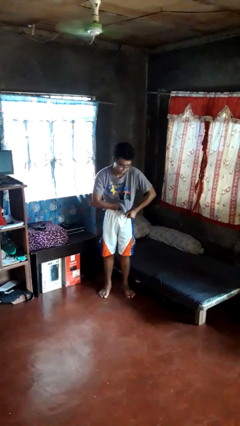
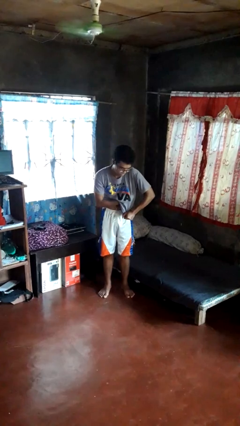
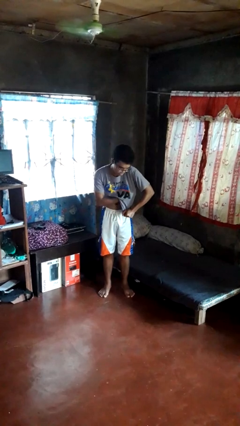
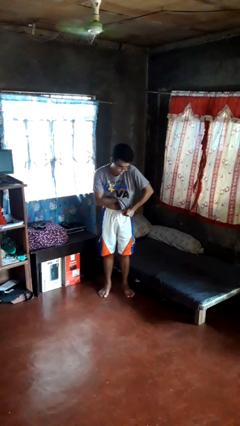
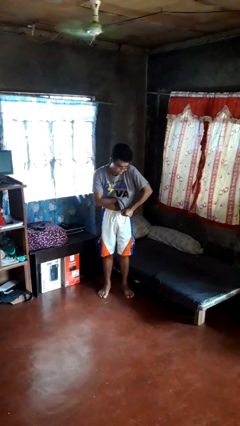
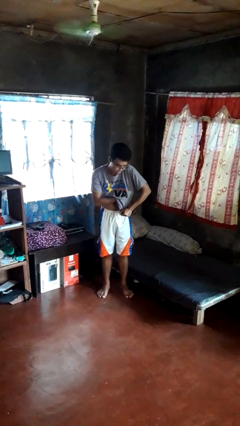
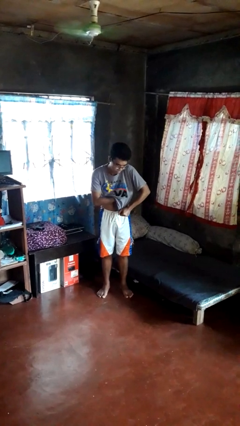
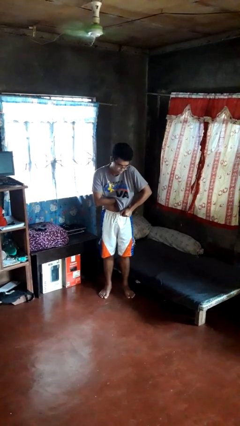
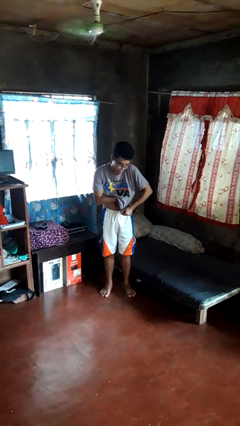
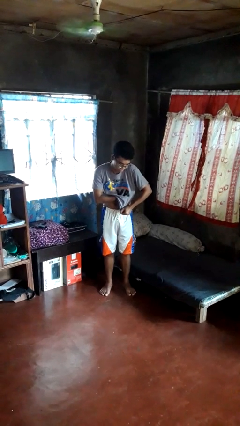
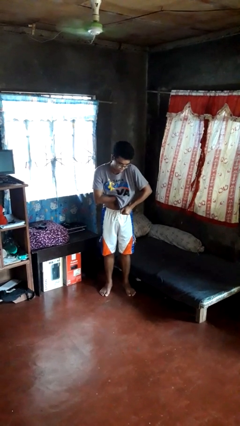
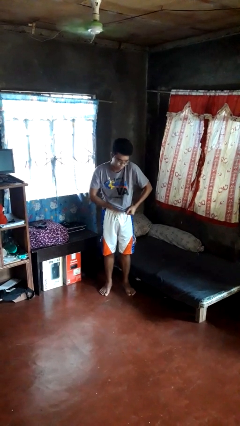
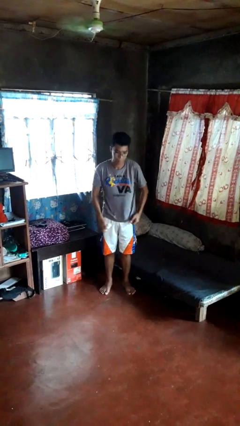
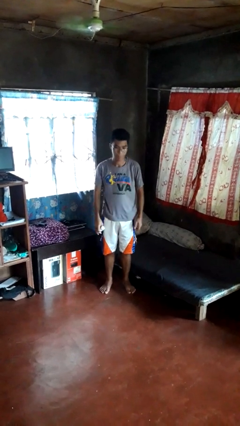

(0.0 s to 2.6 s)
person applies deodorant

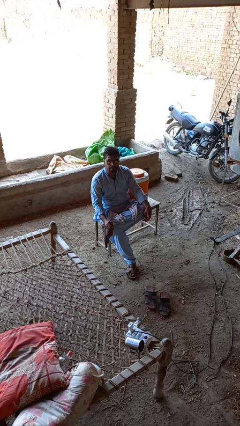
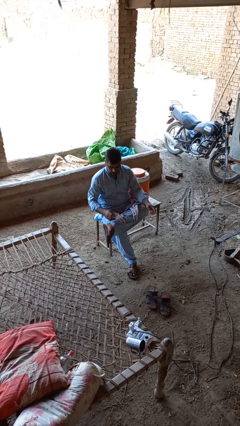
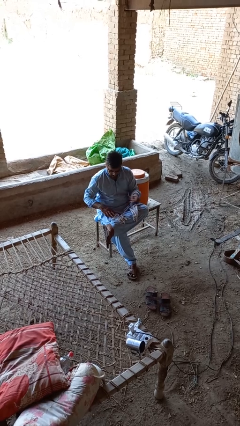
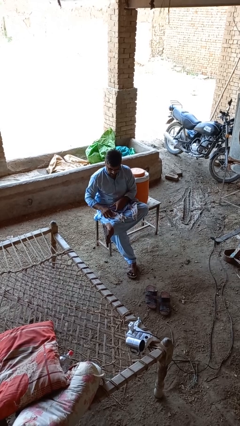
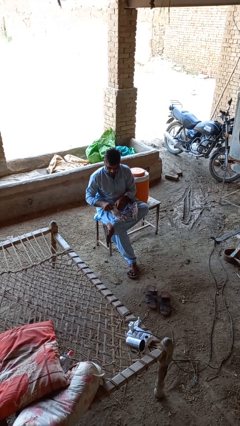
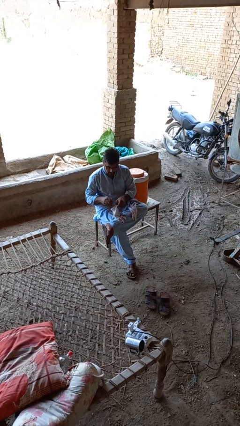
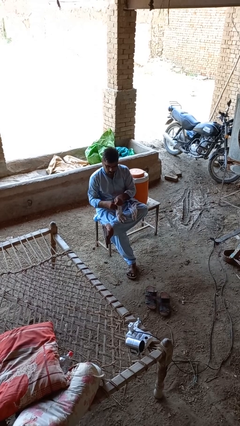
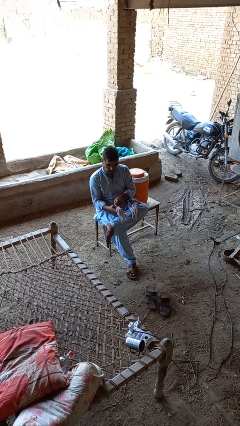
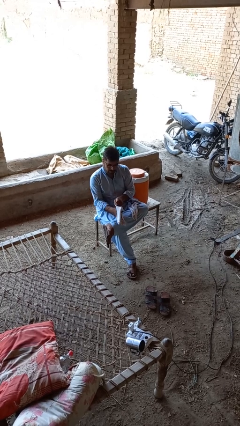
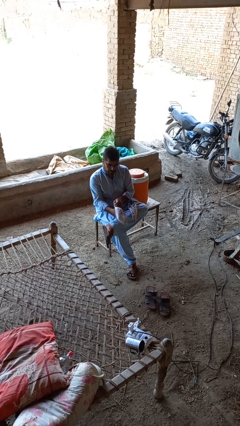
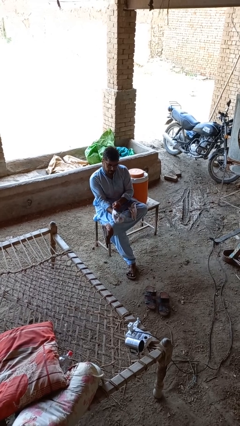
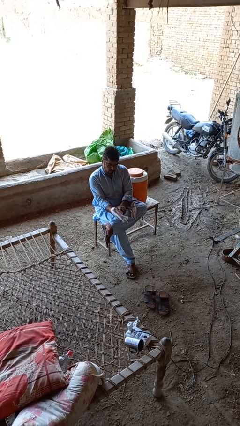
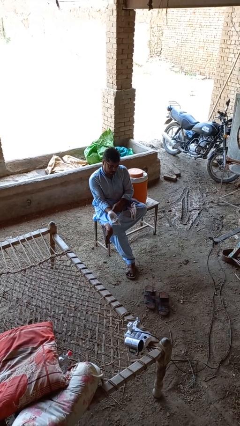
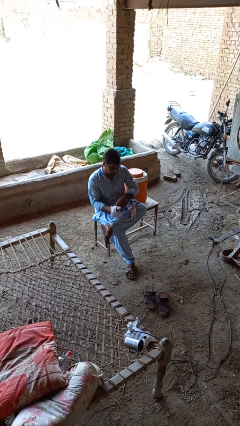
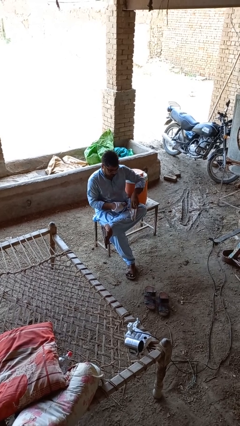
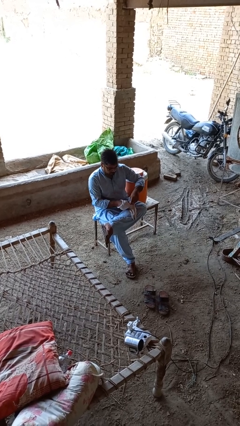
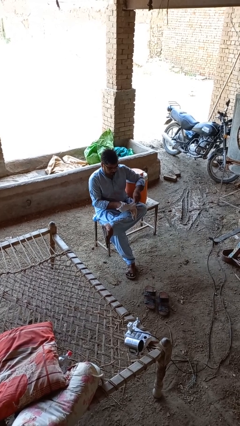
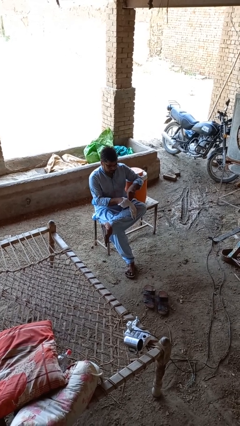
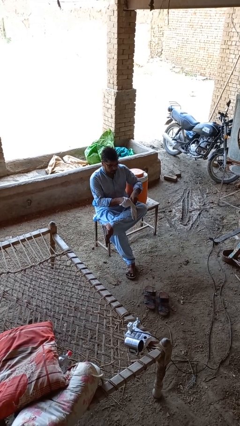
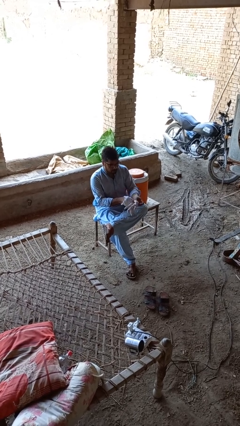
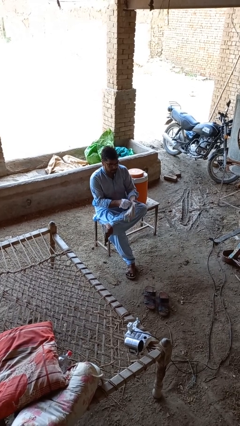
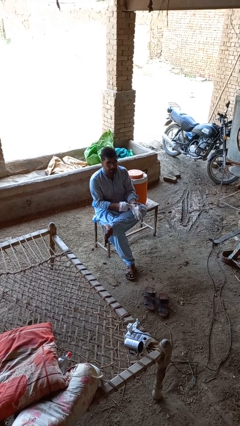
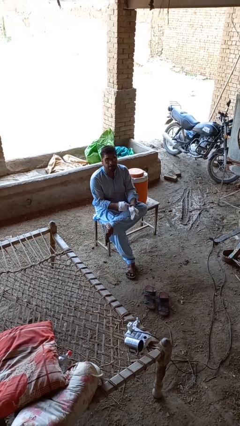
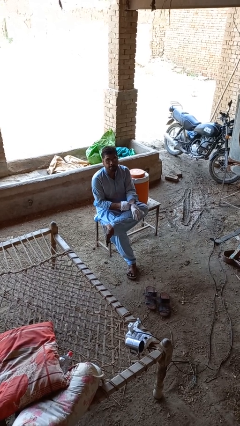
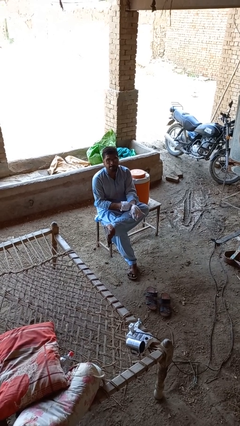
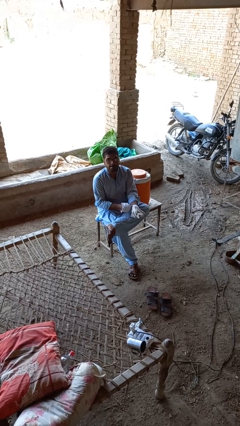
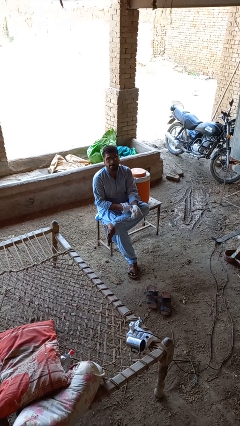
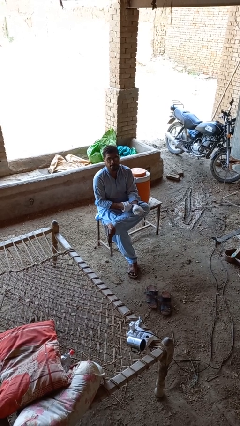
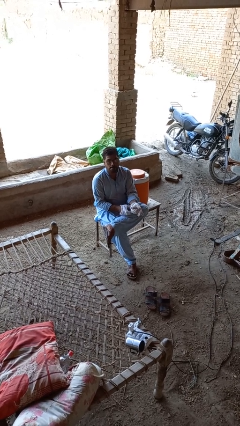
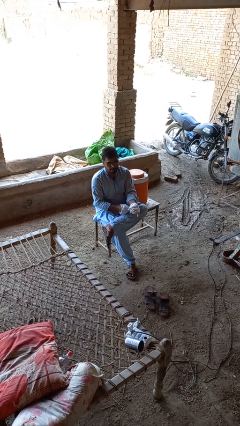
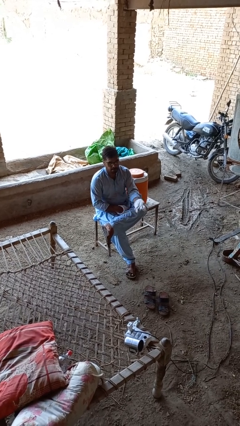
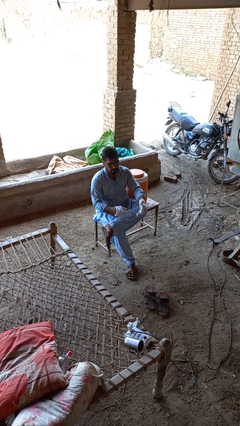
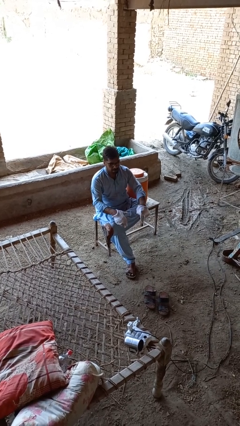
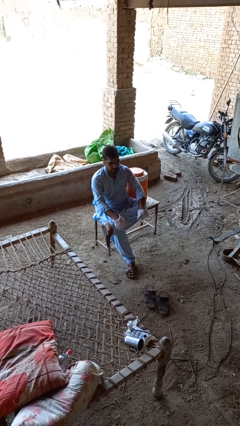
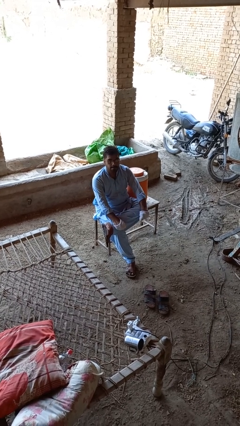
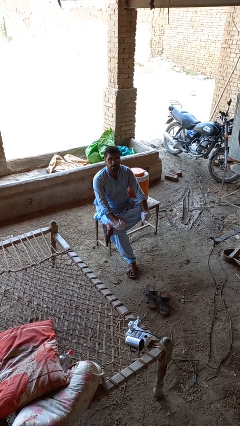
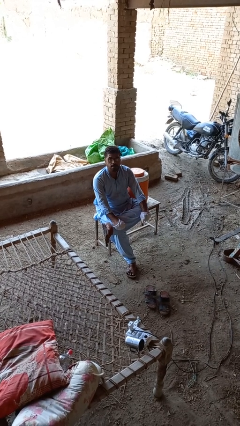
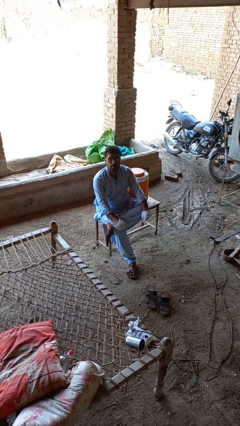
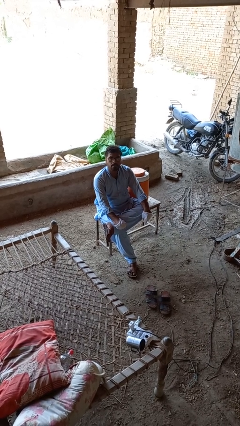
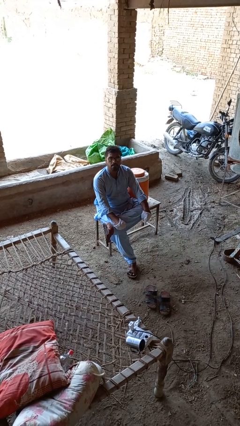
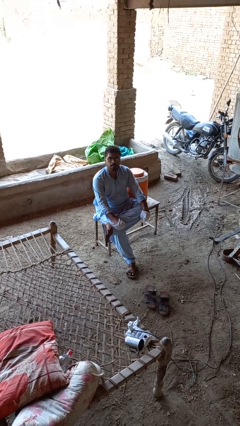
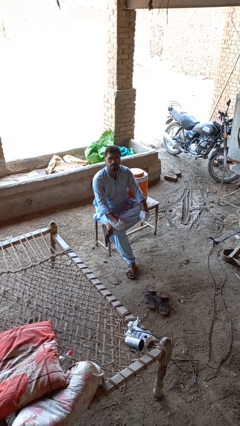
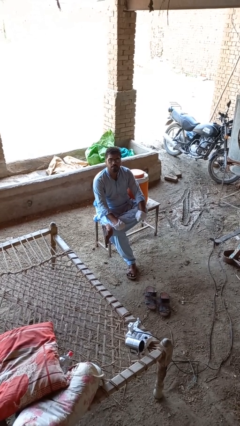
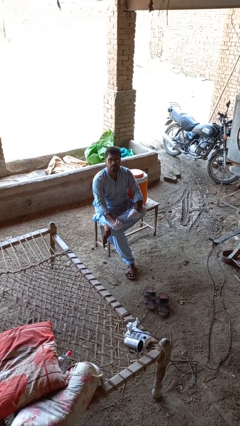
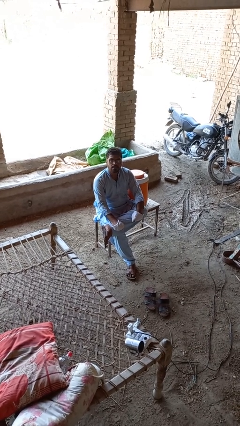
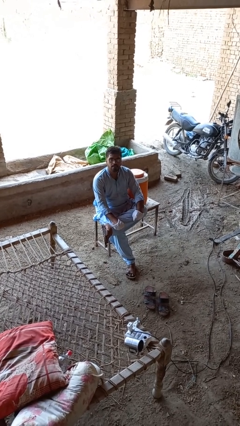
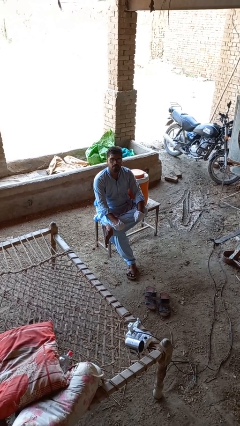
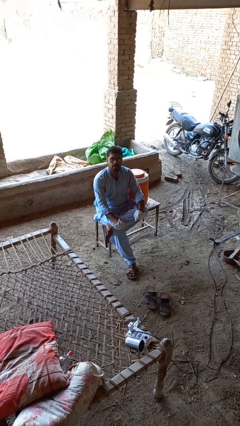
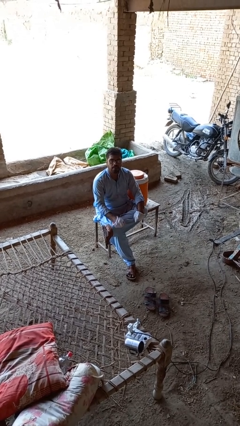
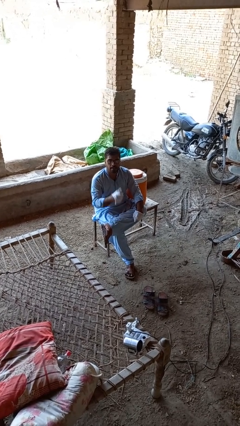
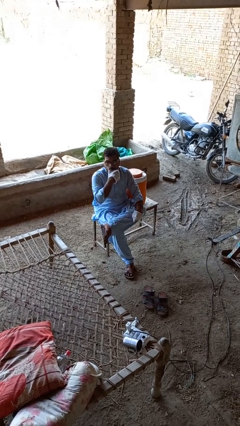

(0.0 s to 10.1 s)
person puts on gloves

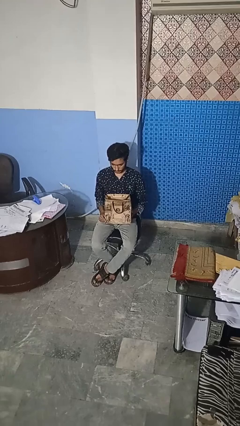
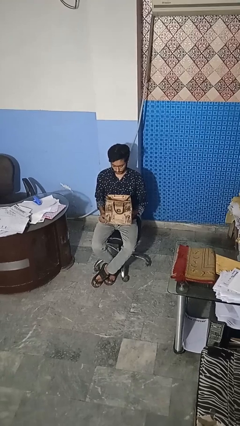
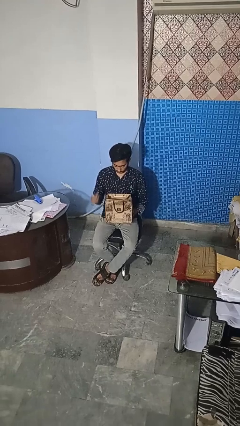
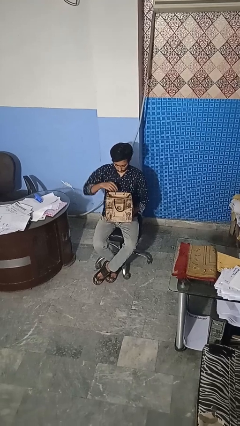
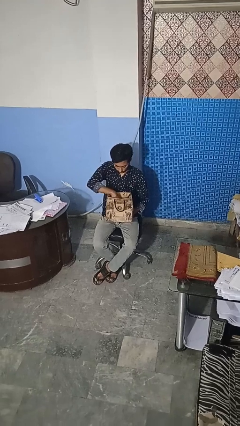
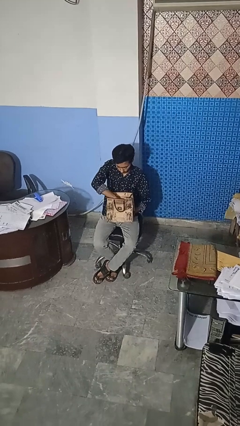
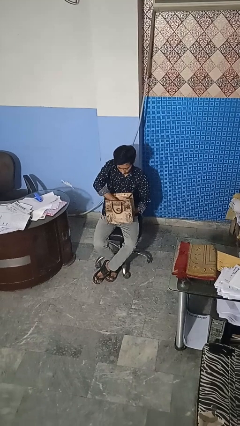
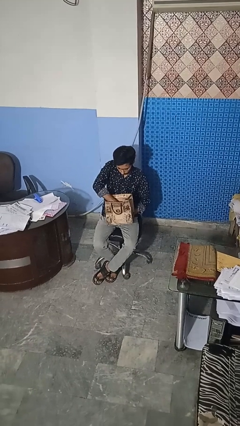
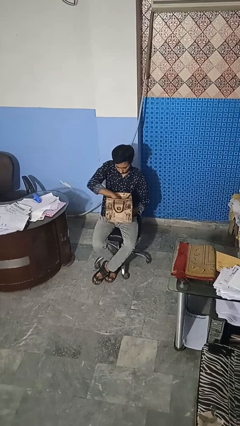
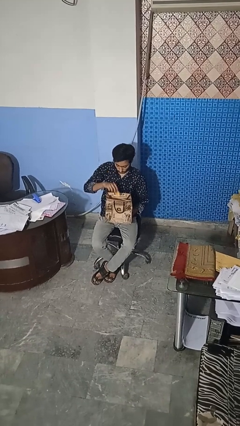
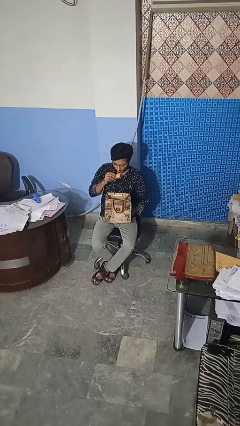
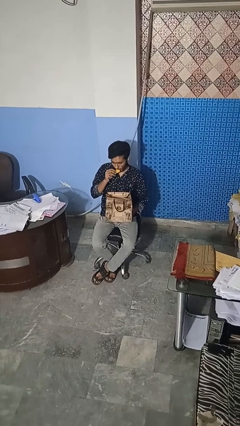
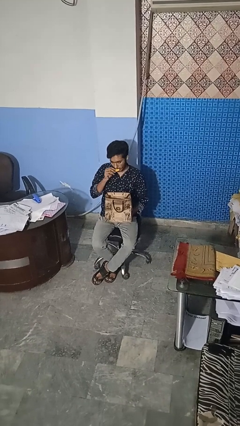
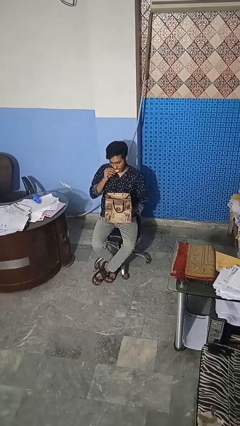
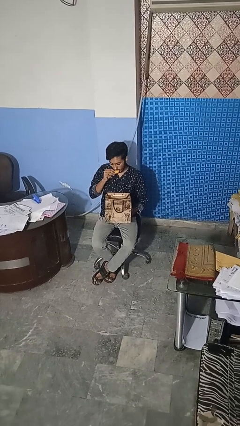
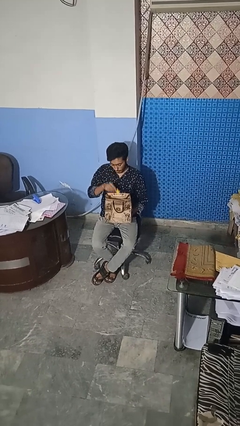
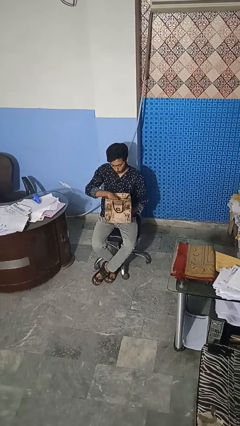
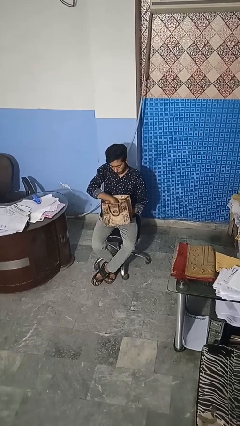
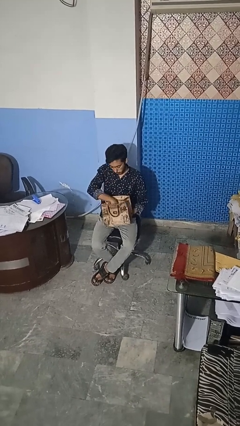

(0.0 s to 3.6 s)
person eats snack from bag

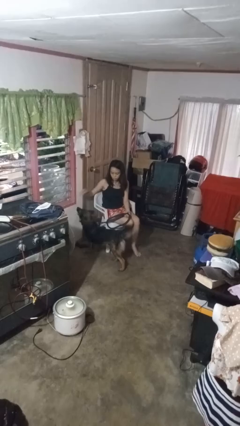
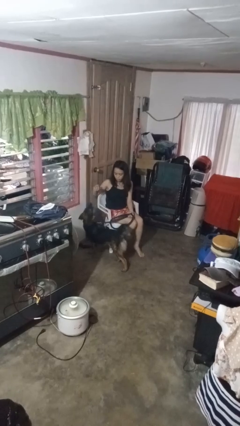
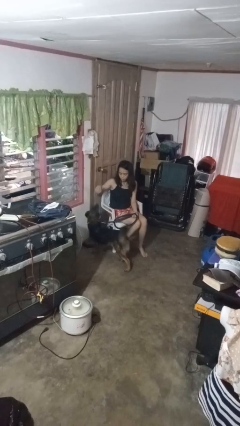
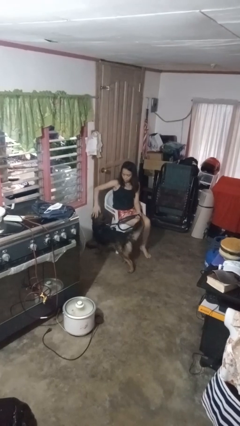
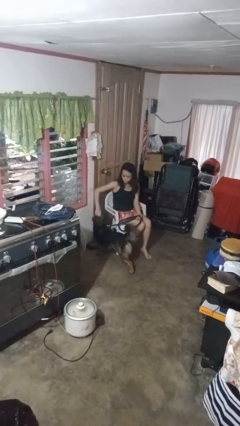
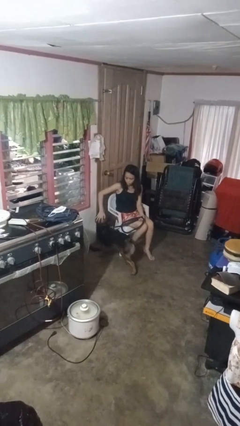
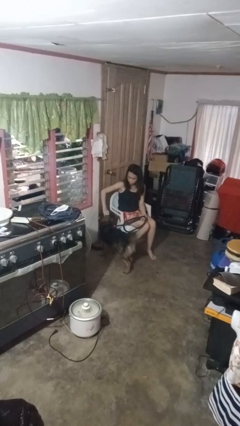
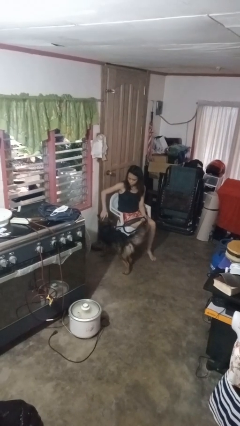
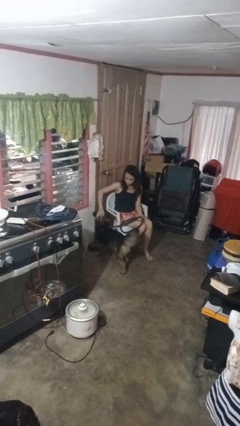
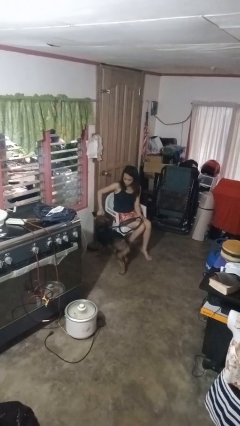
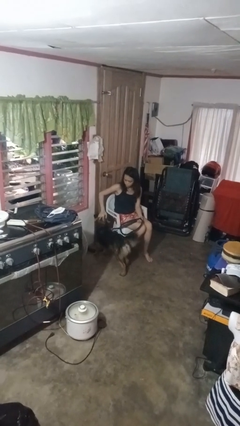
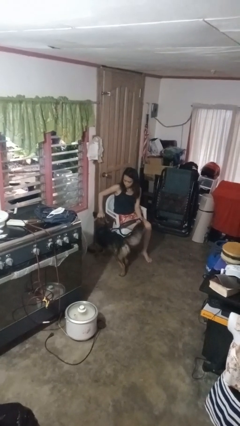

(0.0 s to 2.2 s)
person pets dog
